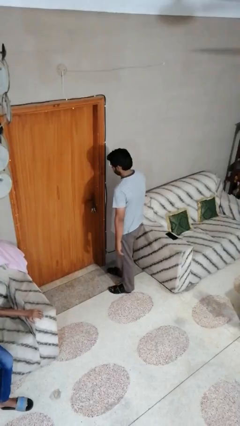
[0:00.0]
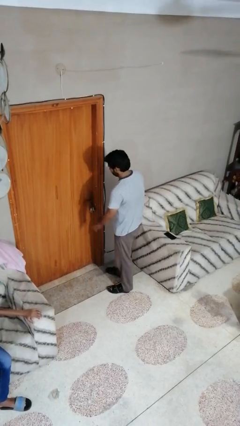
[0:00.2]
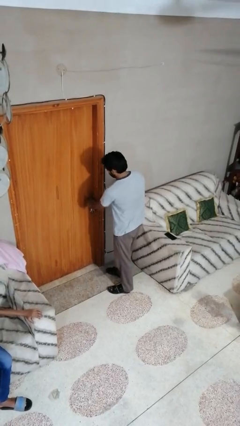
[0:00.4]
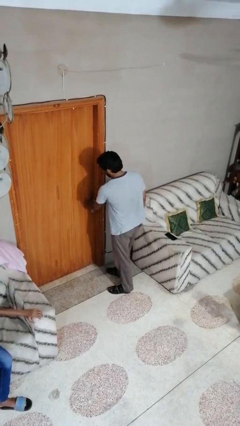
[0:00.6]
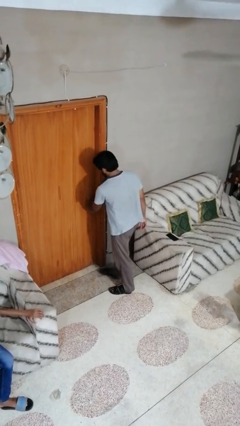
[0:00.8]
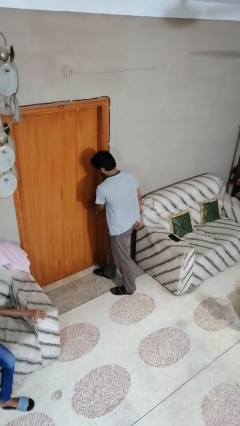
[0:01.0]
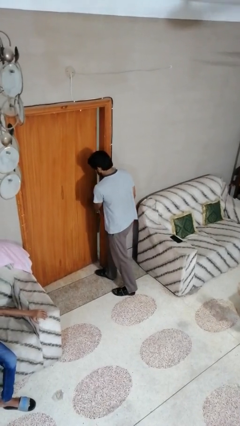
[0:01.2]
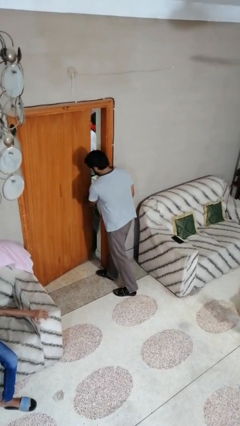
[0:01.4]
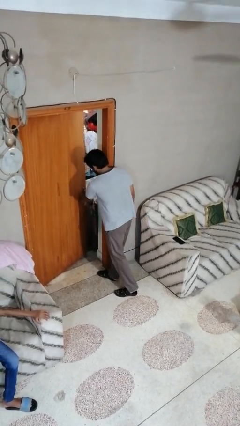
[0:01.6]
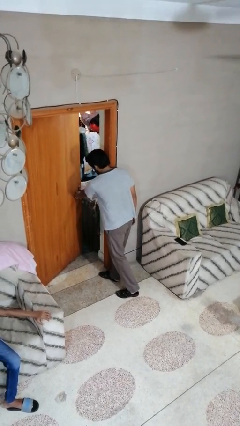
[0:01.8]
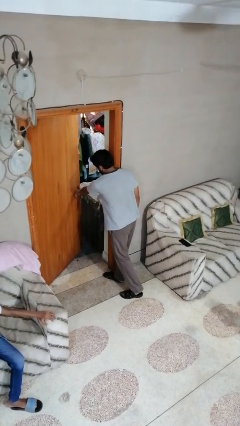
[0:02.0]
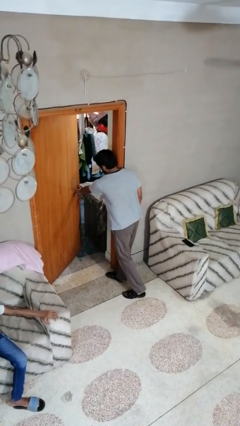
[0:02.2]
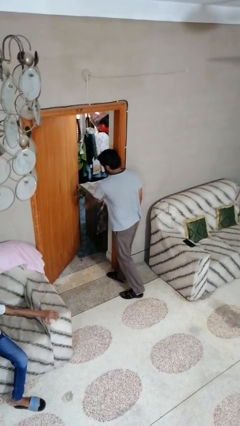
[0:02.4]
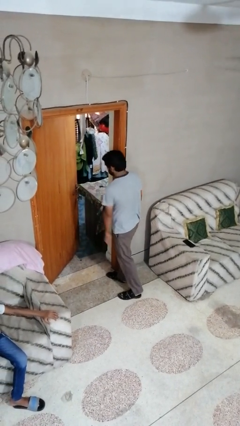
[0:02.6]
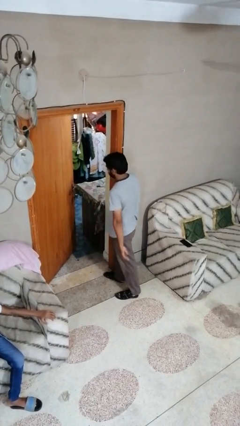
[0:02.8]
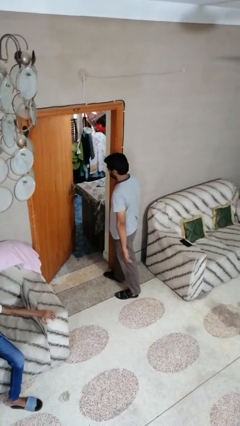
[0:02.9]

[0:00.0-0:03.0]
person opens facility door

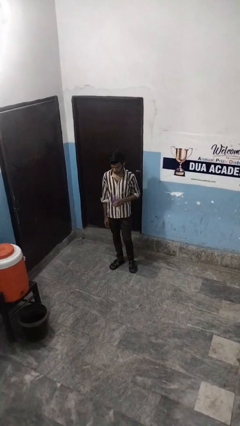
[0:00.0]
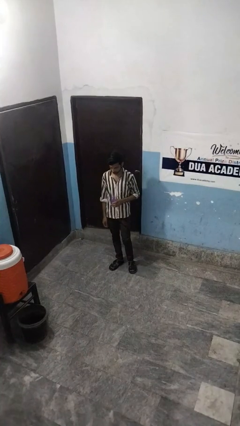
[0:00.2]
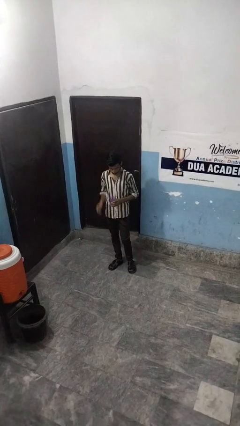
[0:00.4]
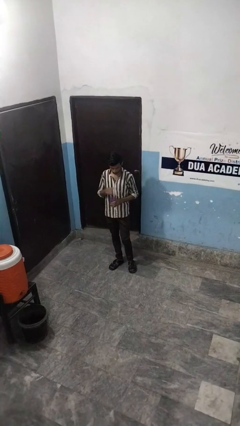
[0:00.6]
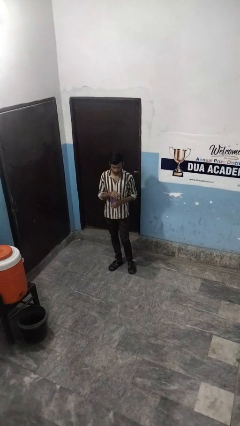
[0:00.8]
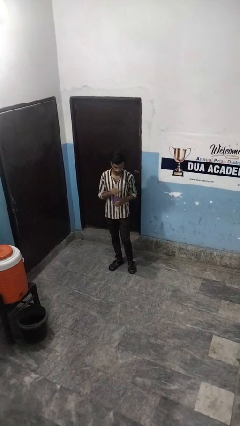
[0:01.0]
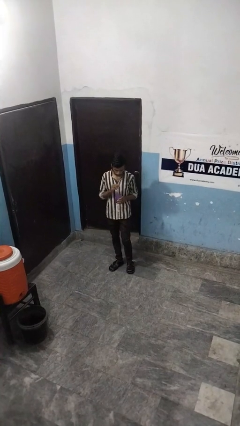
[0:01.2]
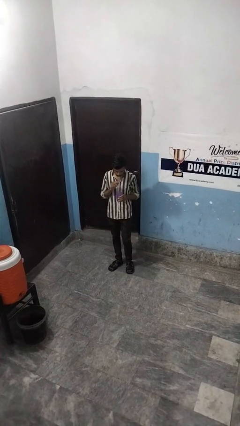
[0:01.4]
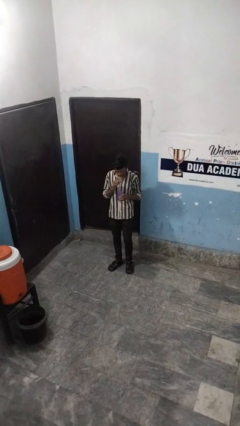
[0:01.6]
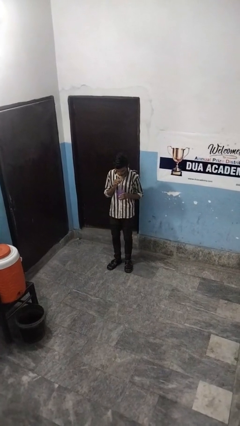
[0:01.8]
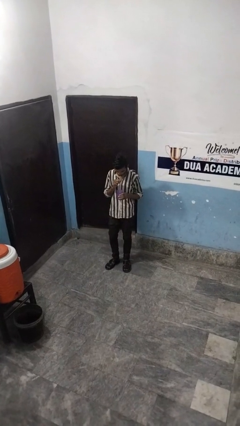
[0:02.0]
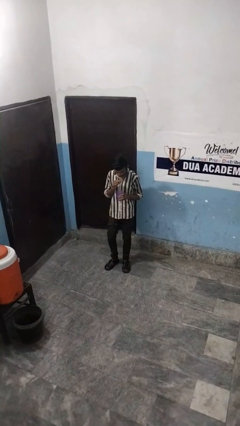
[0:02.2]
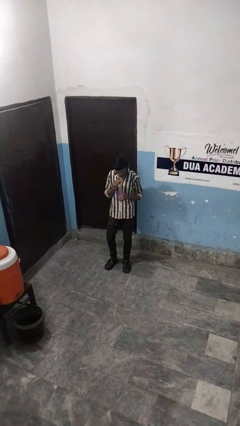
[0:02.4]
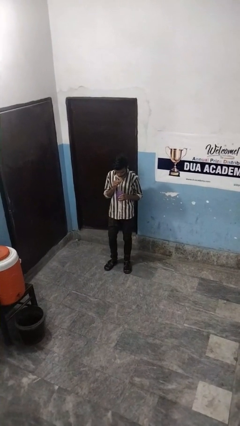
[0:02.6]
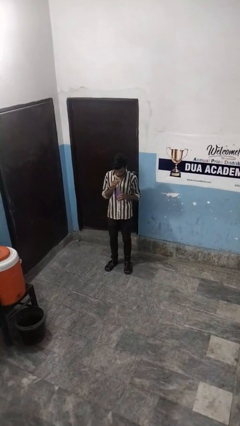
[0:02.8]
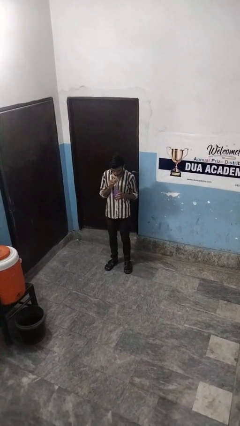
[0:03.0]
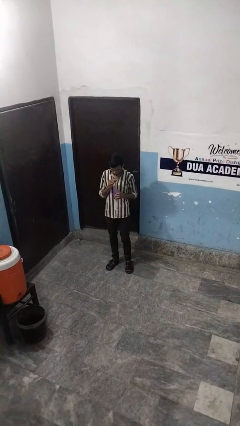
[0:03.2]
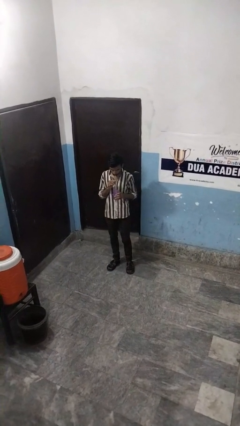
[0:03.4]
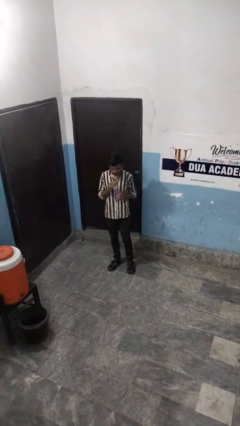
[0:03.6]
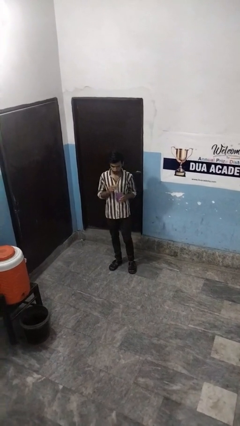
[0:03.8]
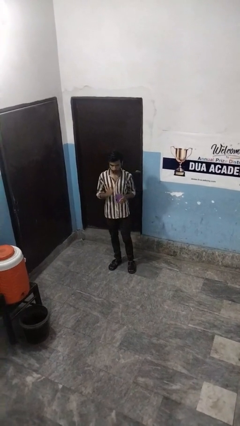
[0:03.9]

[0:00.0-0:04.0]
person drinks from straw

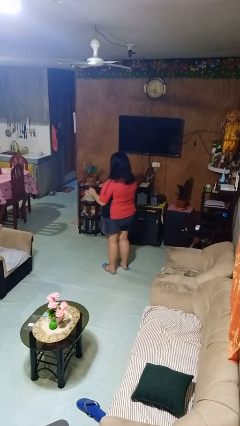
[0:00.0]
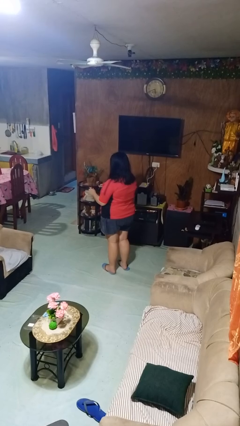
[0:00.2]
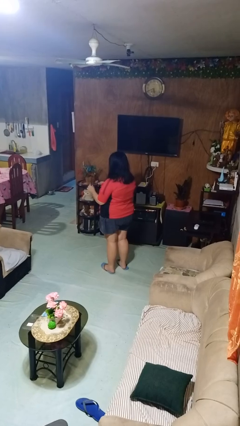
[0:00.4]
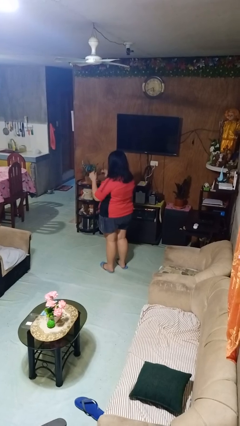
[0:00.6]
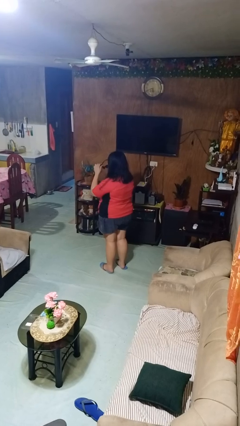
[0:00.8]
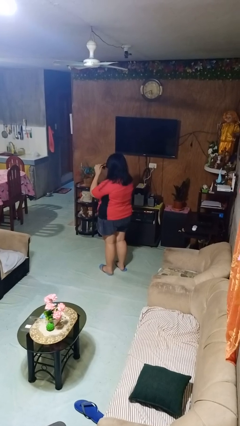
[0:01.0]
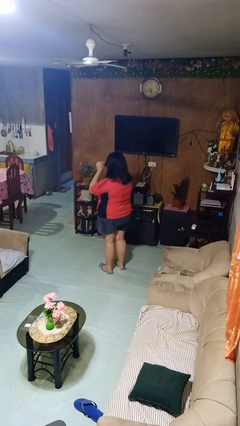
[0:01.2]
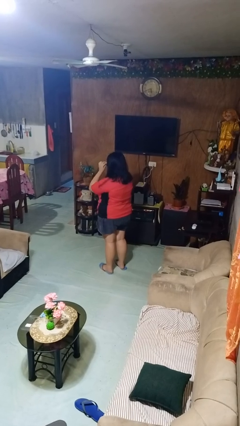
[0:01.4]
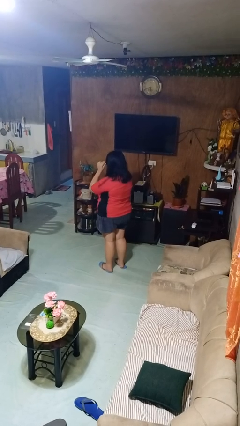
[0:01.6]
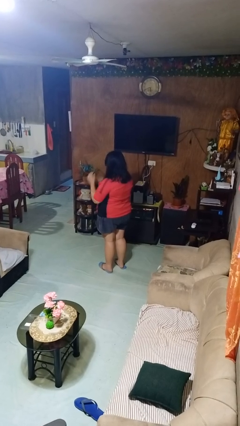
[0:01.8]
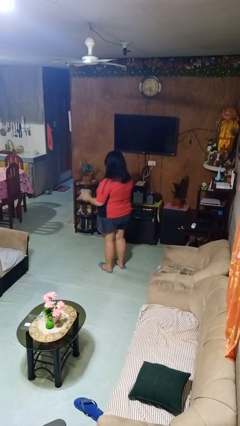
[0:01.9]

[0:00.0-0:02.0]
person puts on sunglasses

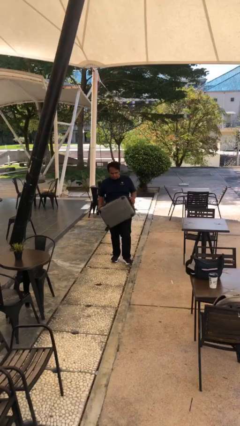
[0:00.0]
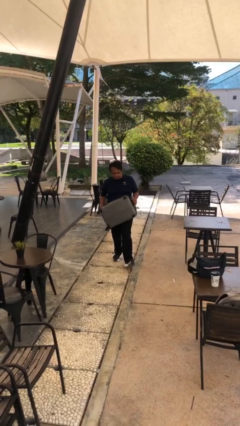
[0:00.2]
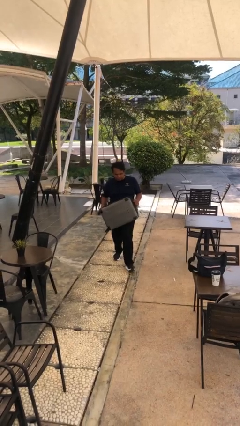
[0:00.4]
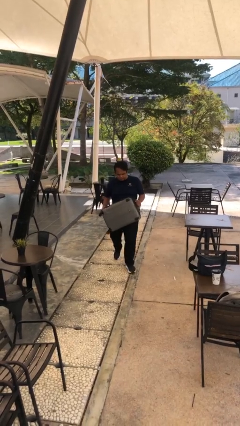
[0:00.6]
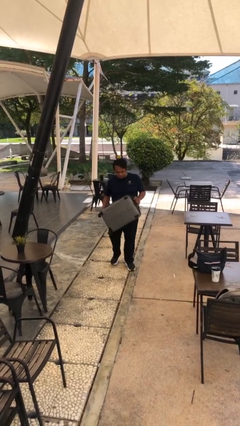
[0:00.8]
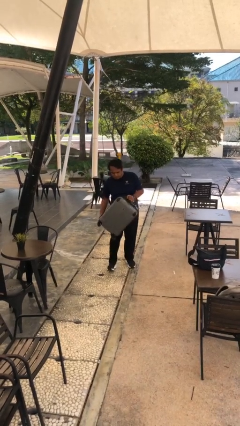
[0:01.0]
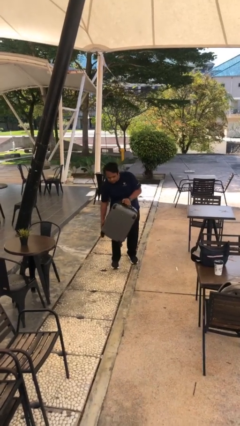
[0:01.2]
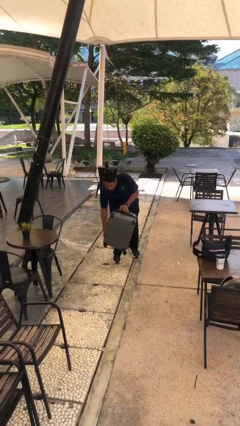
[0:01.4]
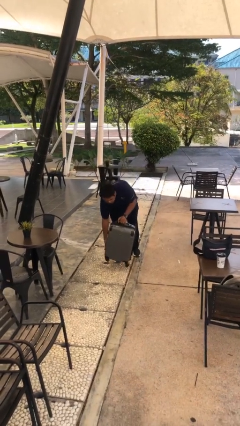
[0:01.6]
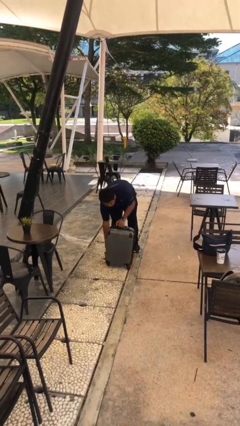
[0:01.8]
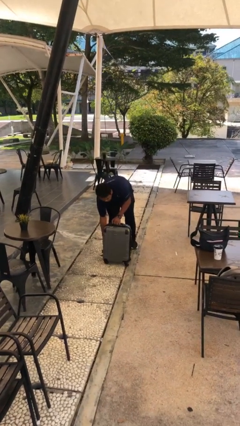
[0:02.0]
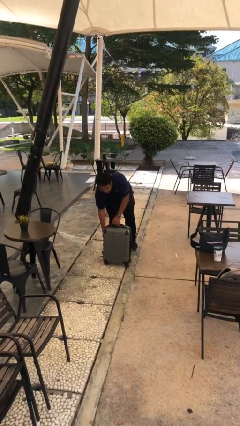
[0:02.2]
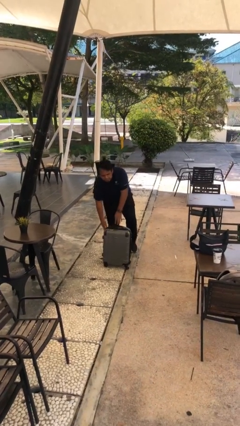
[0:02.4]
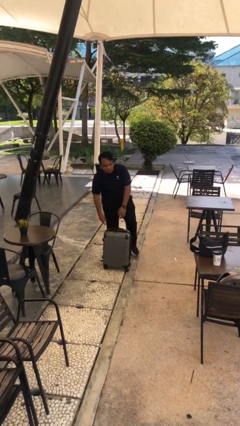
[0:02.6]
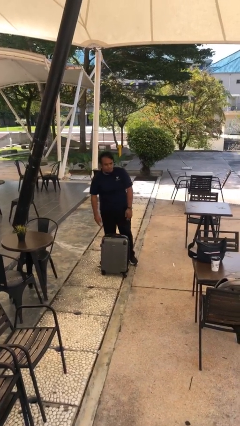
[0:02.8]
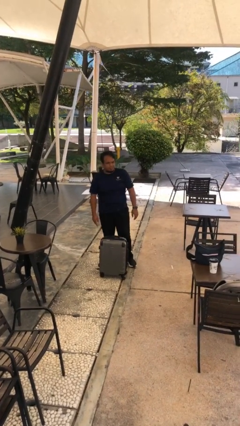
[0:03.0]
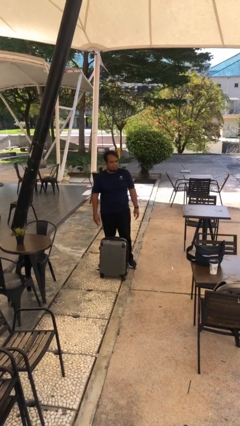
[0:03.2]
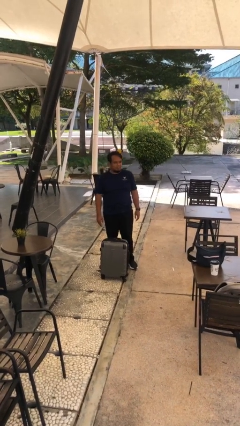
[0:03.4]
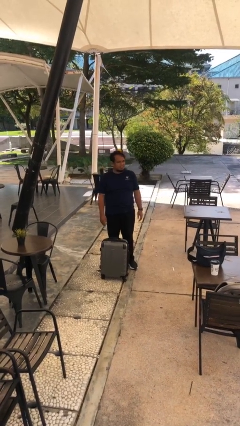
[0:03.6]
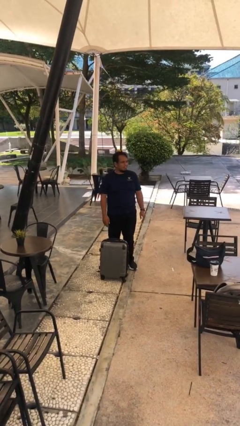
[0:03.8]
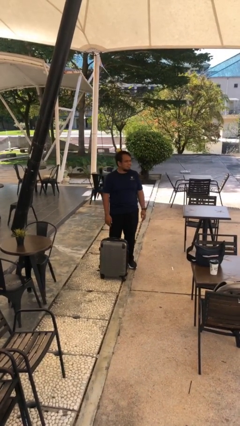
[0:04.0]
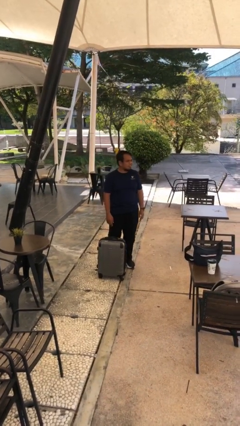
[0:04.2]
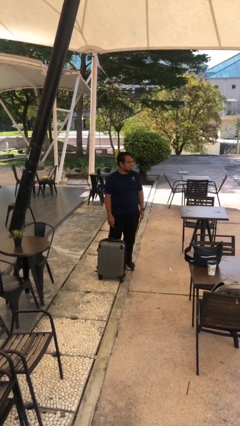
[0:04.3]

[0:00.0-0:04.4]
person puts down object on floor

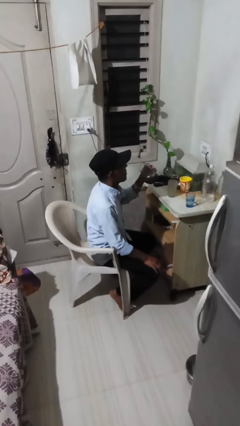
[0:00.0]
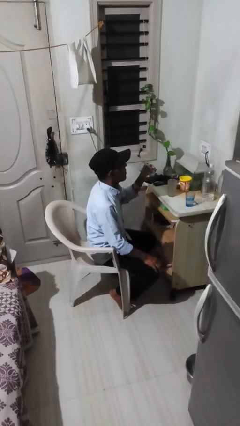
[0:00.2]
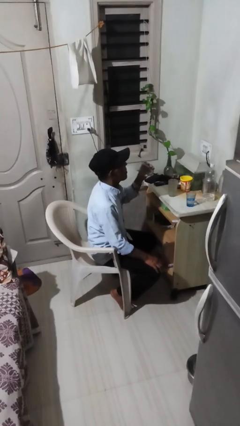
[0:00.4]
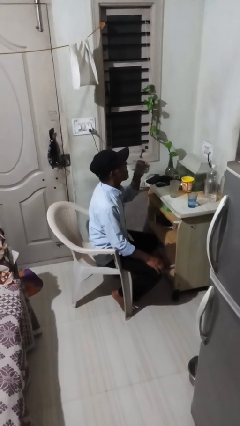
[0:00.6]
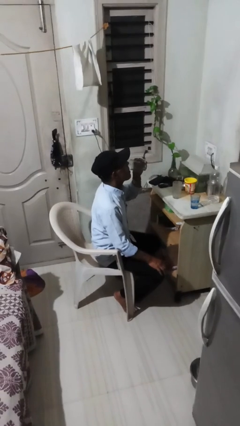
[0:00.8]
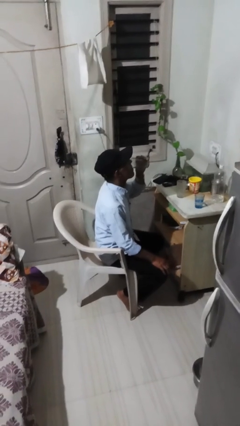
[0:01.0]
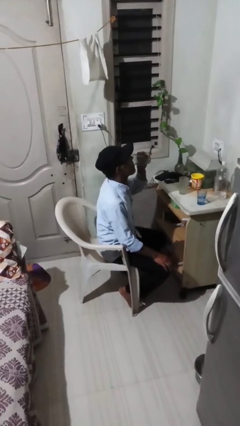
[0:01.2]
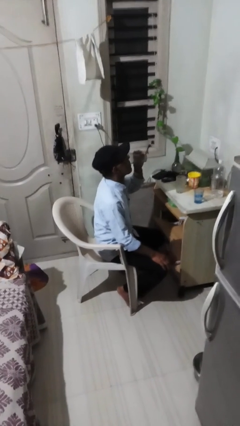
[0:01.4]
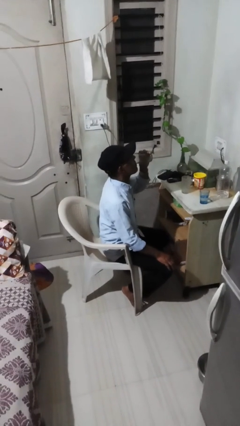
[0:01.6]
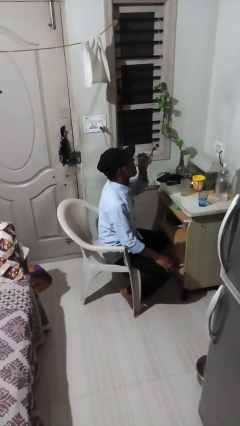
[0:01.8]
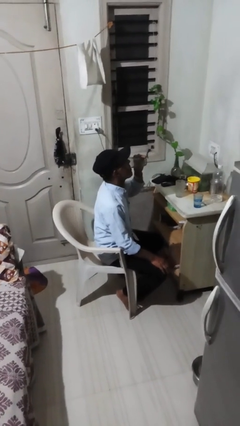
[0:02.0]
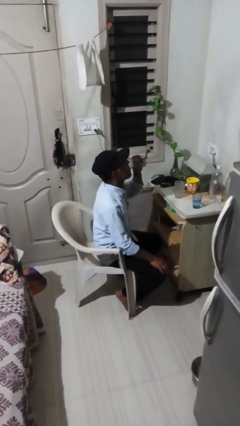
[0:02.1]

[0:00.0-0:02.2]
person drinks from shotglass

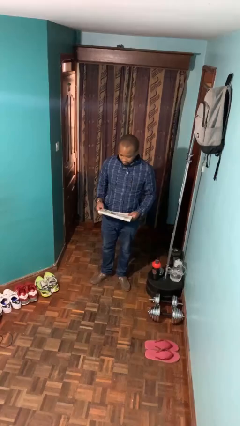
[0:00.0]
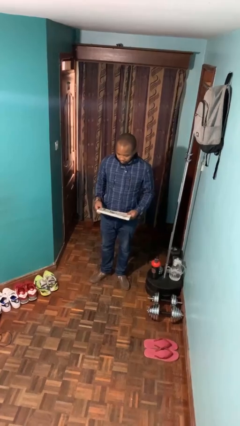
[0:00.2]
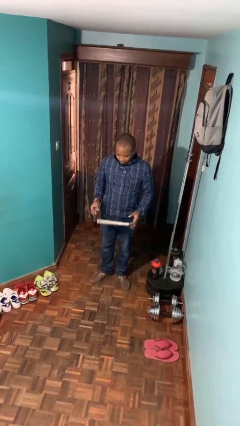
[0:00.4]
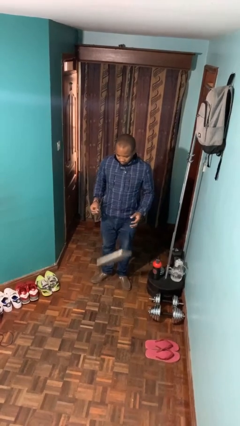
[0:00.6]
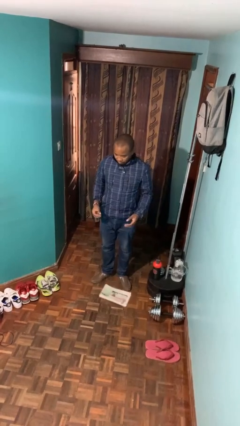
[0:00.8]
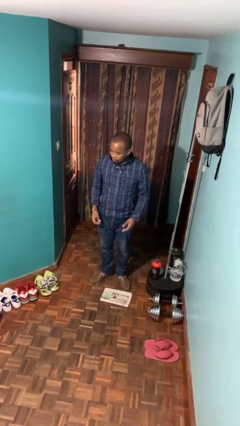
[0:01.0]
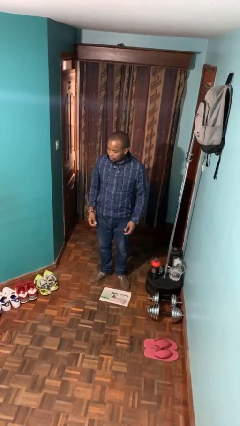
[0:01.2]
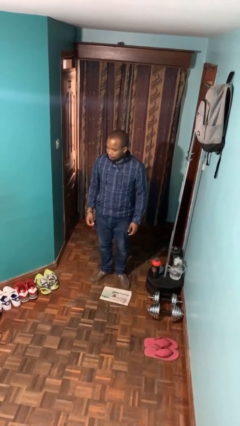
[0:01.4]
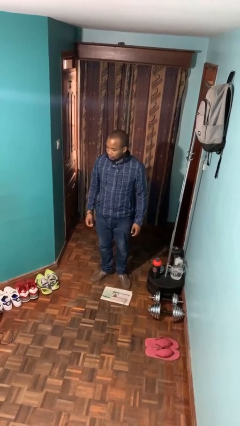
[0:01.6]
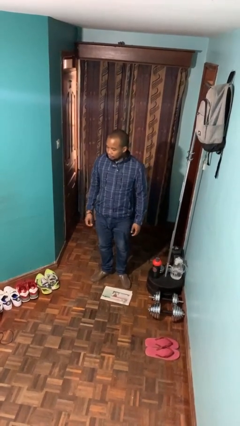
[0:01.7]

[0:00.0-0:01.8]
person drops object
